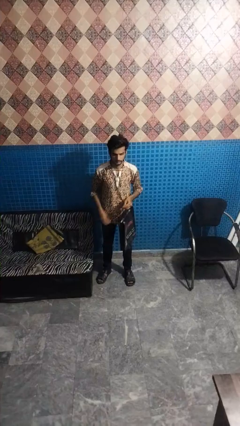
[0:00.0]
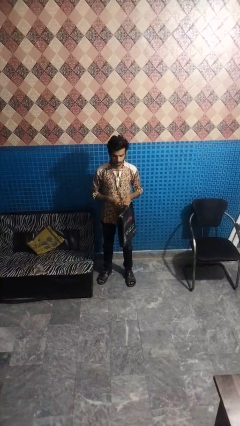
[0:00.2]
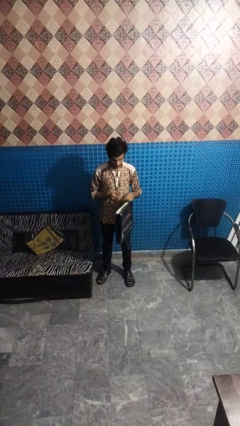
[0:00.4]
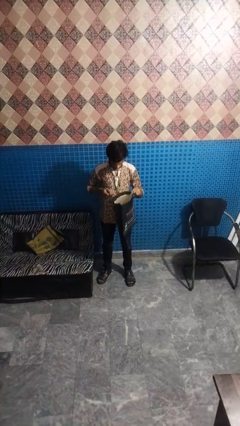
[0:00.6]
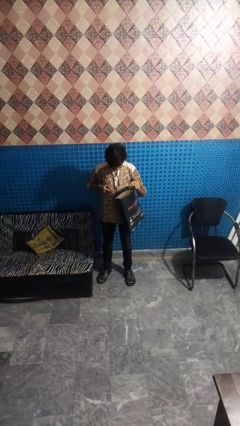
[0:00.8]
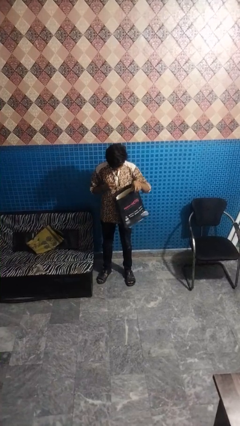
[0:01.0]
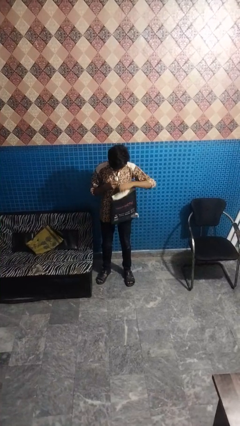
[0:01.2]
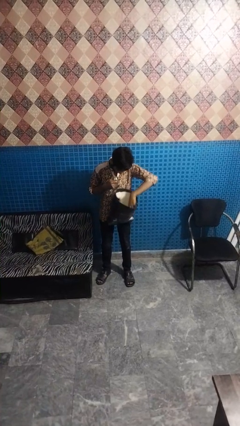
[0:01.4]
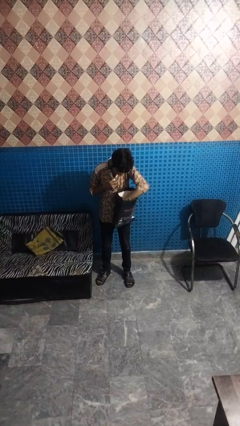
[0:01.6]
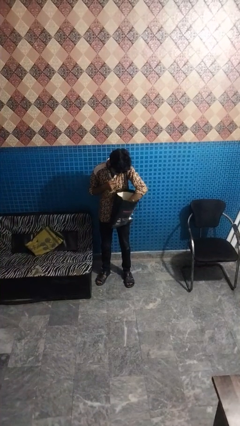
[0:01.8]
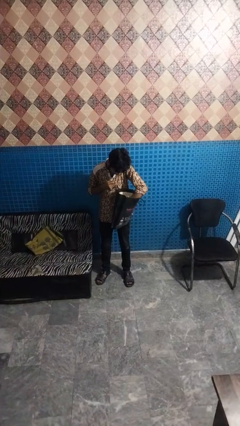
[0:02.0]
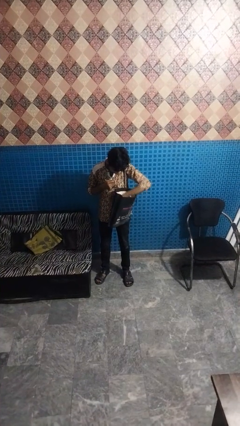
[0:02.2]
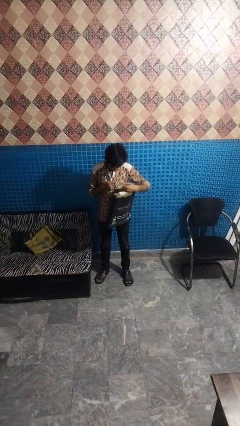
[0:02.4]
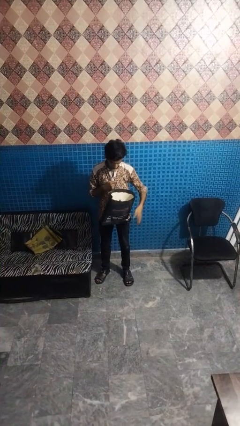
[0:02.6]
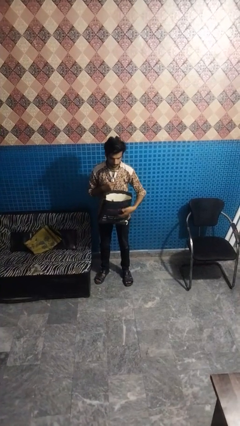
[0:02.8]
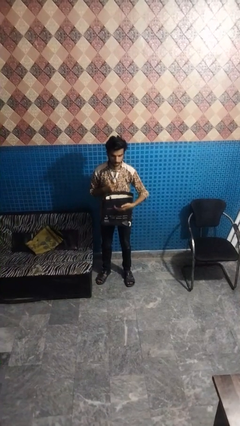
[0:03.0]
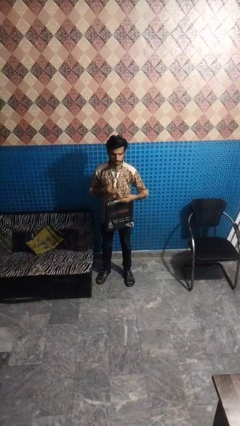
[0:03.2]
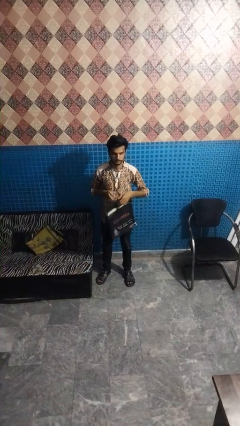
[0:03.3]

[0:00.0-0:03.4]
person searches in bag

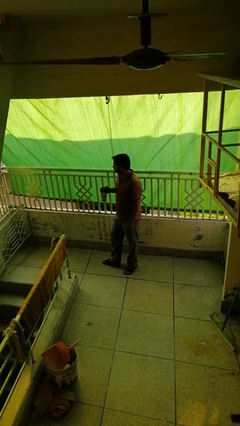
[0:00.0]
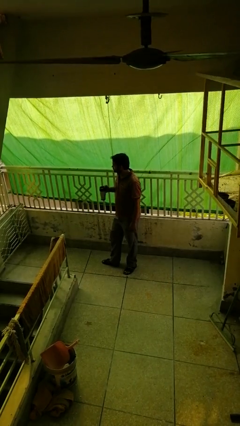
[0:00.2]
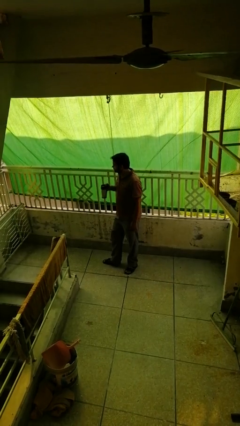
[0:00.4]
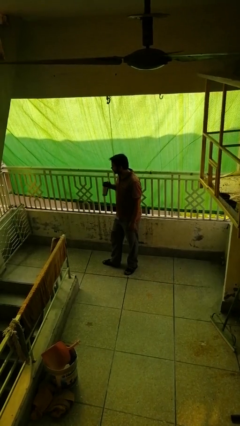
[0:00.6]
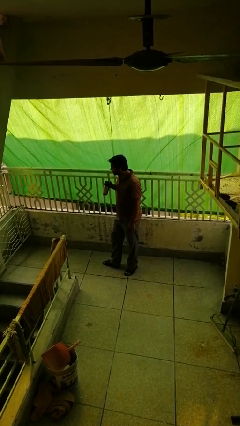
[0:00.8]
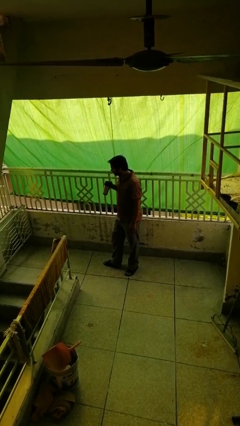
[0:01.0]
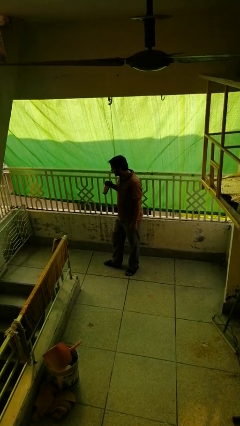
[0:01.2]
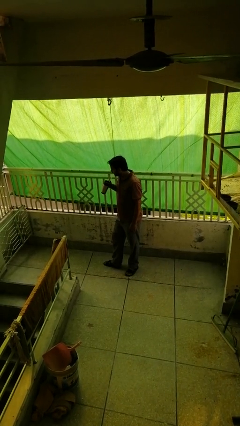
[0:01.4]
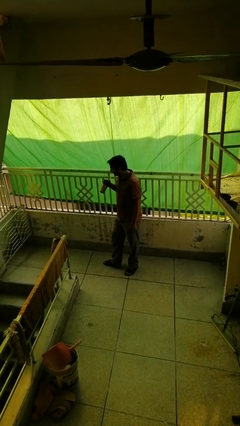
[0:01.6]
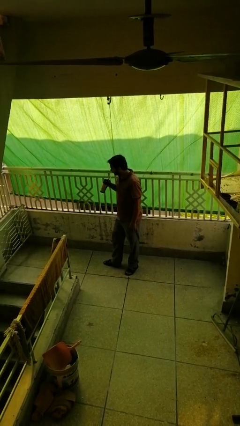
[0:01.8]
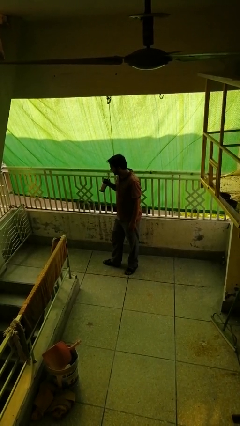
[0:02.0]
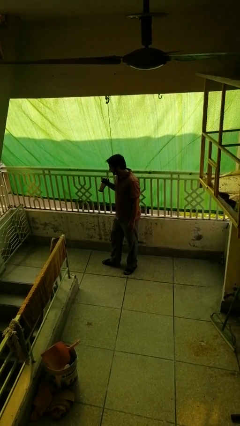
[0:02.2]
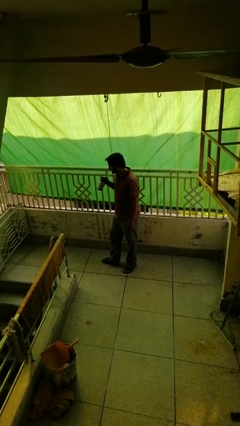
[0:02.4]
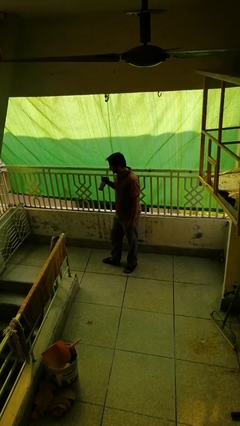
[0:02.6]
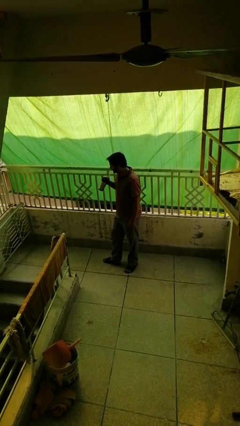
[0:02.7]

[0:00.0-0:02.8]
person drinks from straw

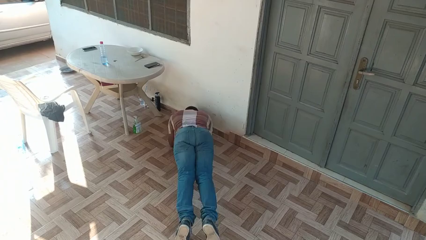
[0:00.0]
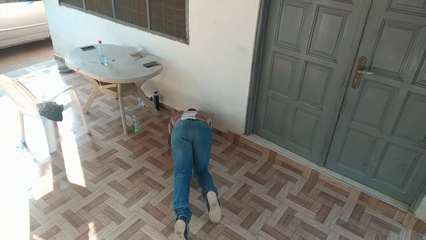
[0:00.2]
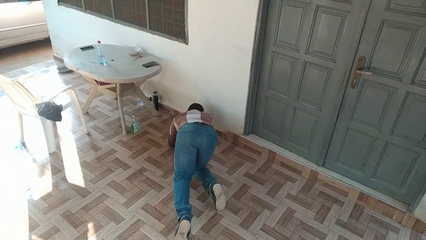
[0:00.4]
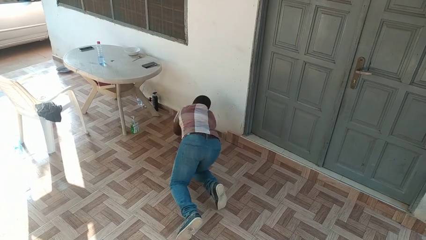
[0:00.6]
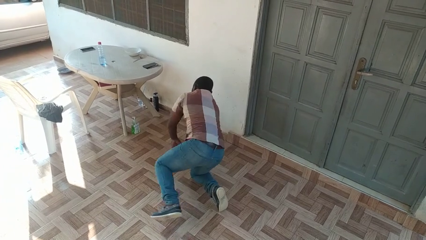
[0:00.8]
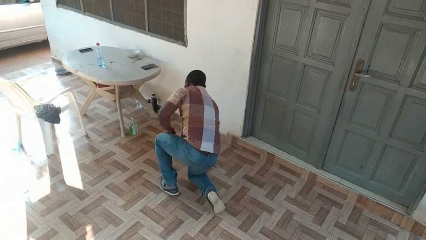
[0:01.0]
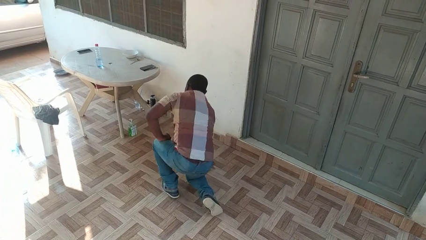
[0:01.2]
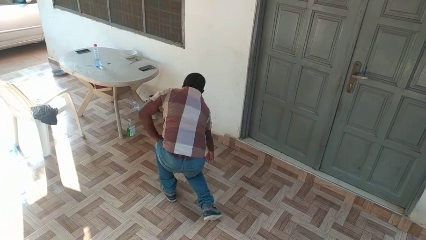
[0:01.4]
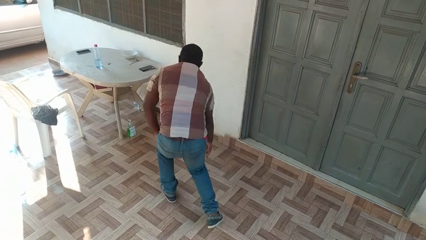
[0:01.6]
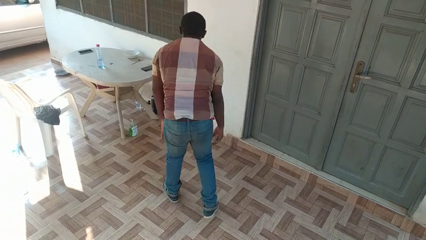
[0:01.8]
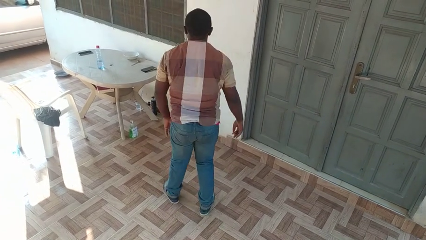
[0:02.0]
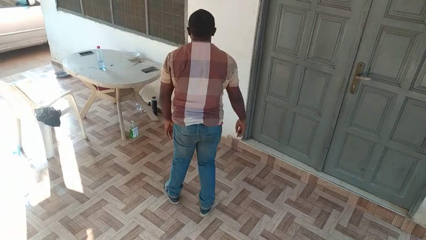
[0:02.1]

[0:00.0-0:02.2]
person stands up from floor

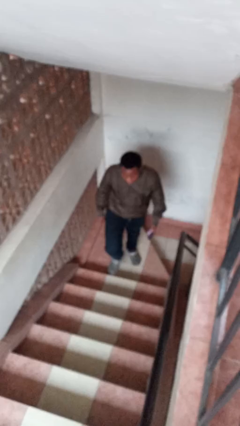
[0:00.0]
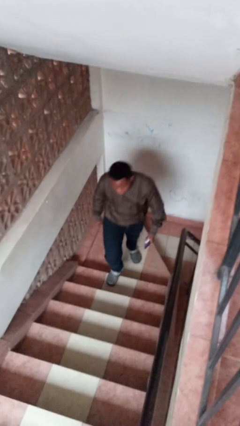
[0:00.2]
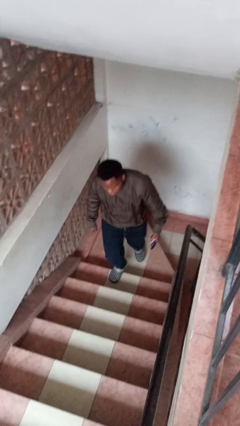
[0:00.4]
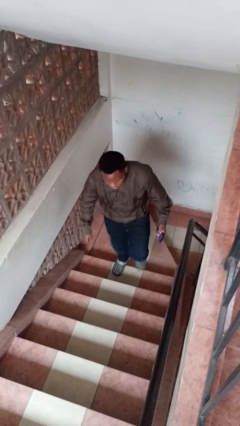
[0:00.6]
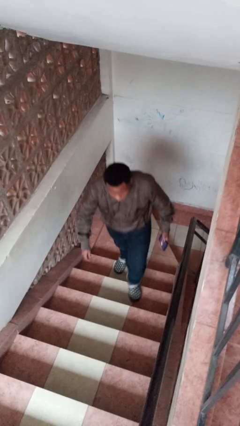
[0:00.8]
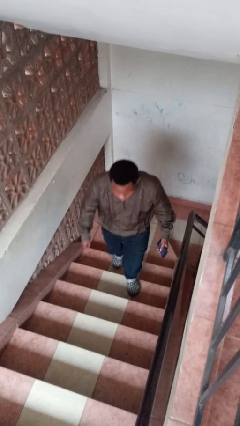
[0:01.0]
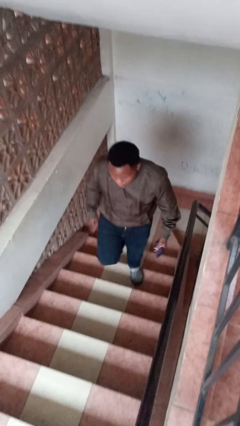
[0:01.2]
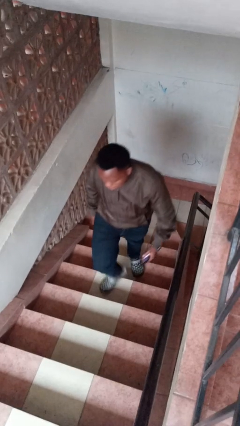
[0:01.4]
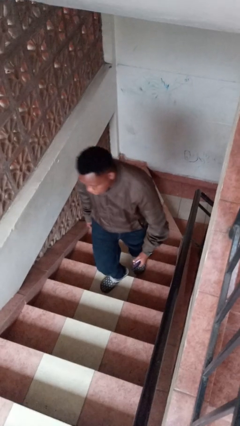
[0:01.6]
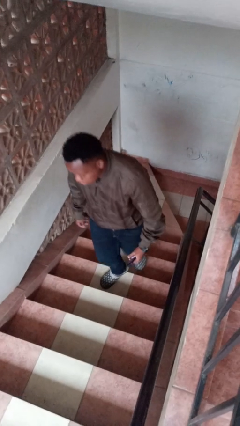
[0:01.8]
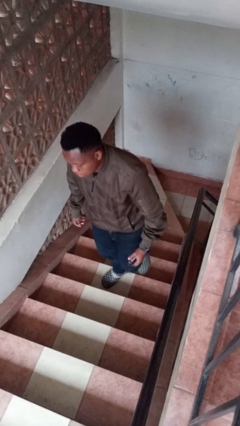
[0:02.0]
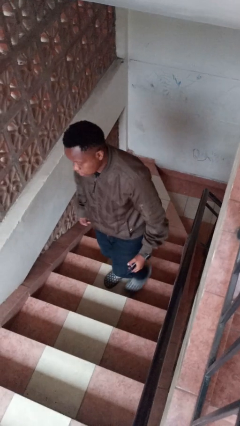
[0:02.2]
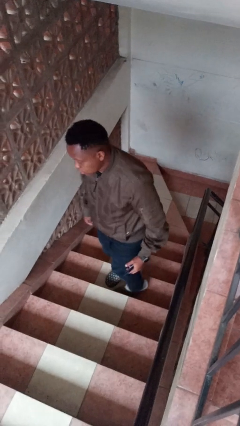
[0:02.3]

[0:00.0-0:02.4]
person climbs up stairs

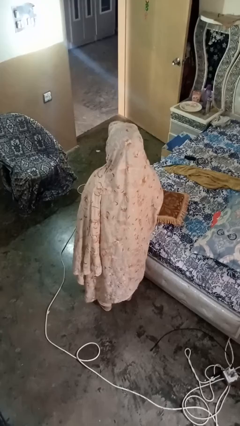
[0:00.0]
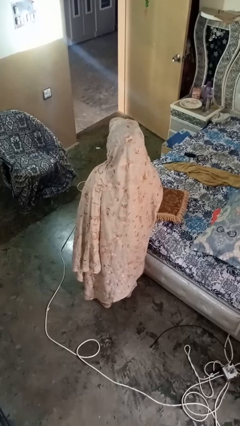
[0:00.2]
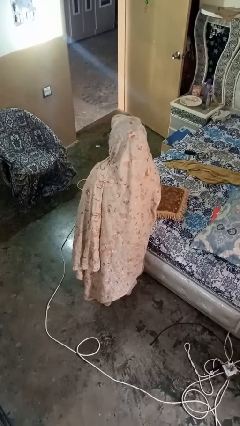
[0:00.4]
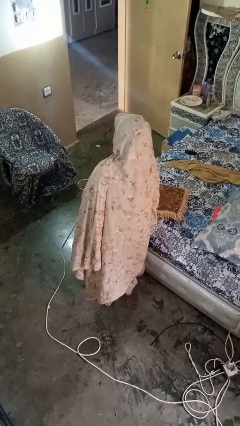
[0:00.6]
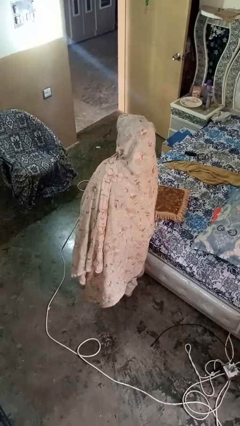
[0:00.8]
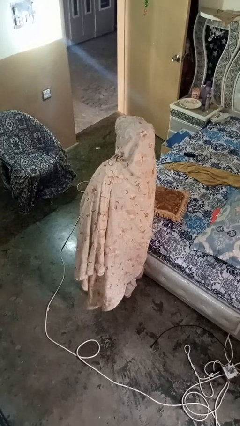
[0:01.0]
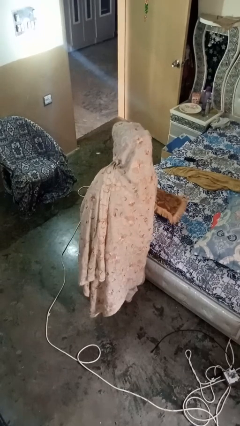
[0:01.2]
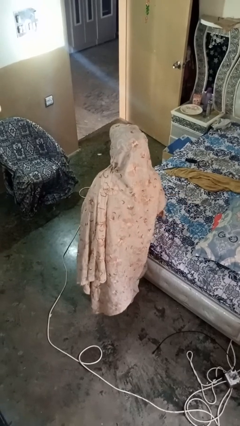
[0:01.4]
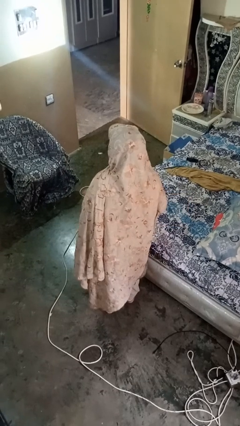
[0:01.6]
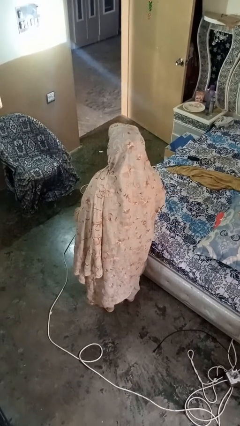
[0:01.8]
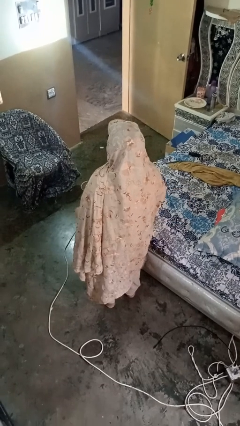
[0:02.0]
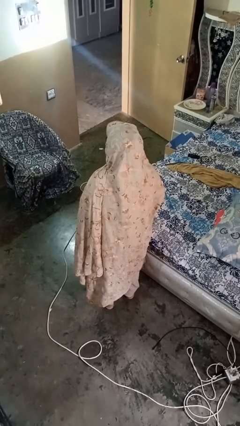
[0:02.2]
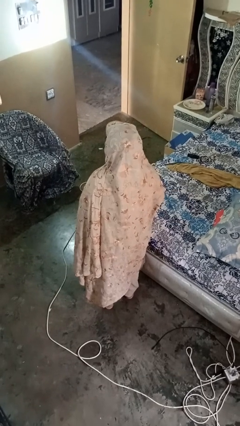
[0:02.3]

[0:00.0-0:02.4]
person picks up object from bed

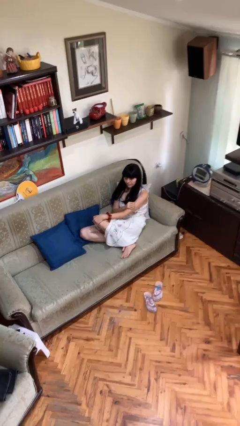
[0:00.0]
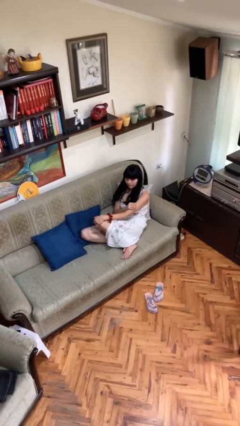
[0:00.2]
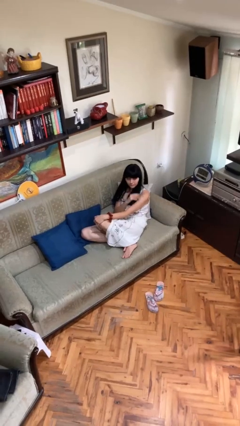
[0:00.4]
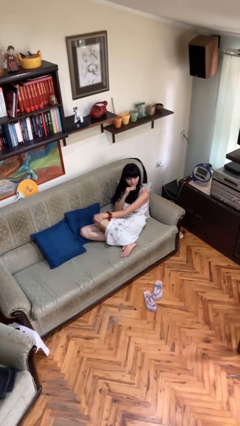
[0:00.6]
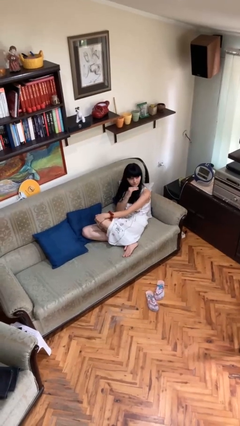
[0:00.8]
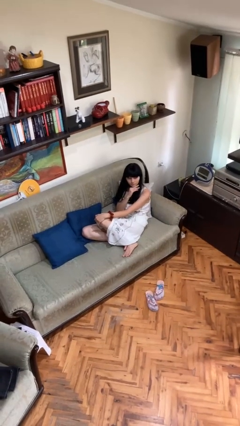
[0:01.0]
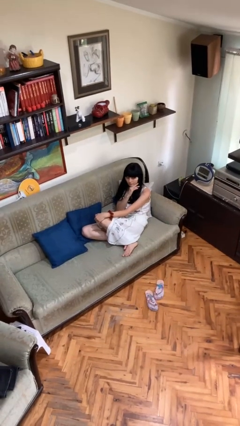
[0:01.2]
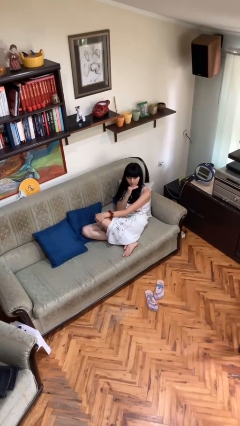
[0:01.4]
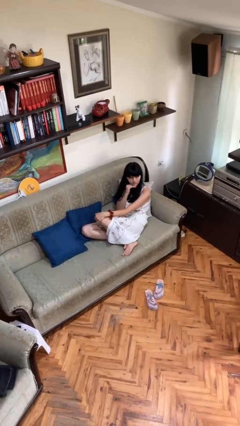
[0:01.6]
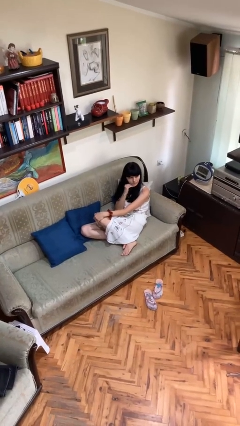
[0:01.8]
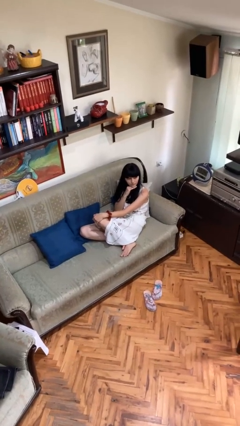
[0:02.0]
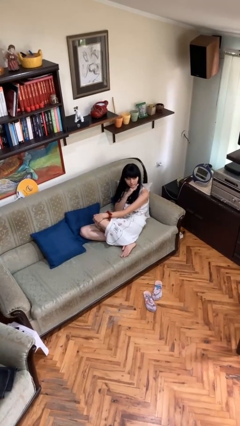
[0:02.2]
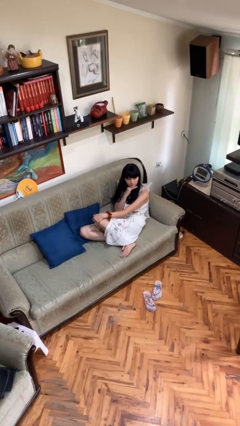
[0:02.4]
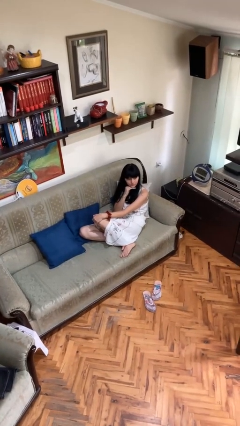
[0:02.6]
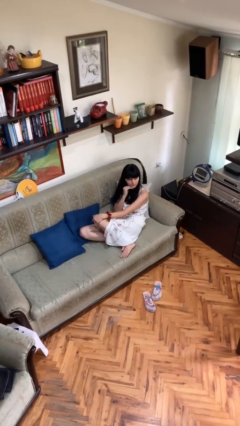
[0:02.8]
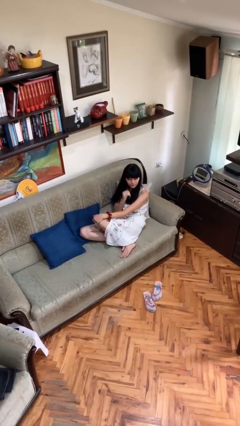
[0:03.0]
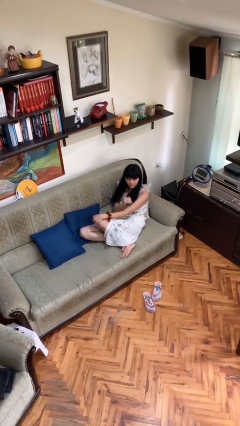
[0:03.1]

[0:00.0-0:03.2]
person strokes chin

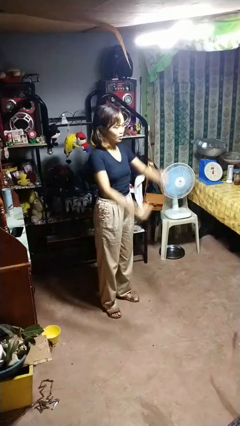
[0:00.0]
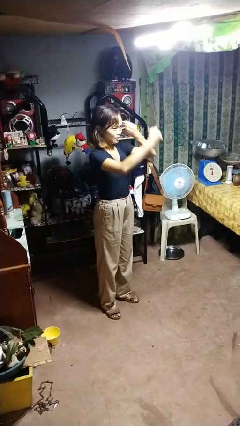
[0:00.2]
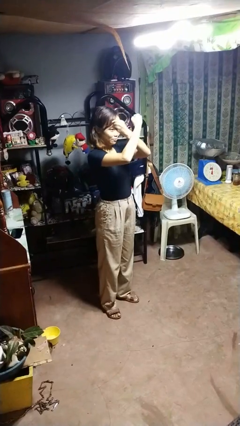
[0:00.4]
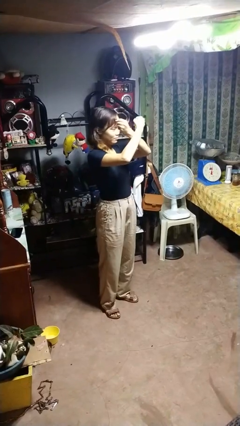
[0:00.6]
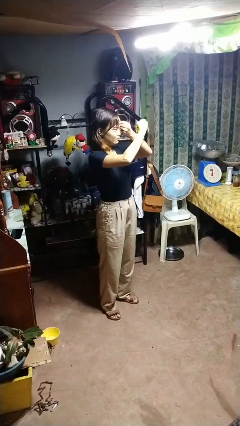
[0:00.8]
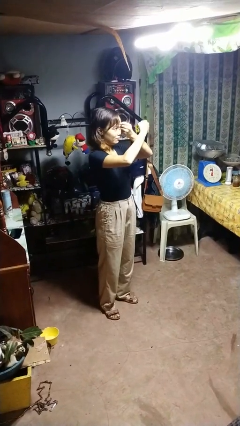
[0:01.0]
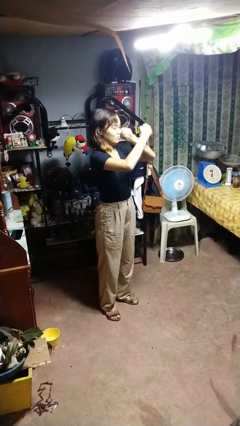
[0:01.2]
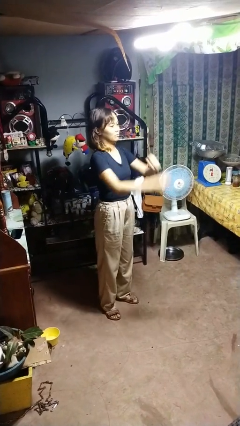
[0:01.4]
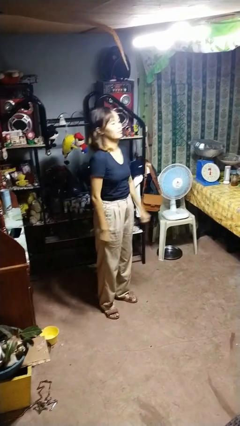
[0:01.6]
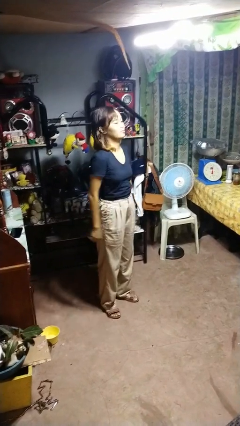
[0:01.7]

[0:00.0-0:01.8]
person gestures arms x
